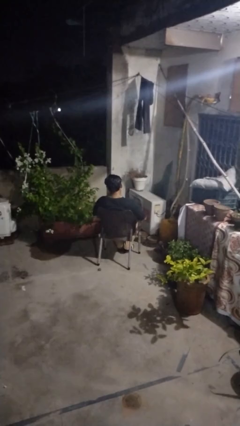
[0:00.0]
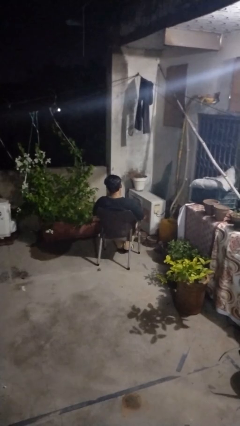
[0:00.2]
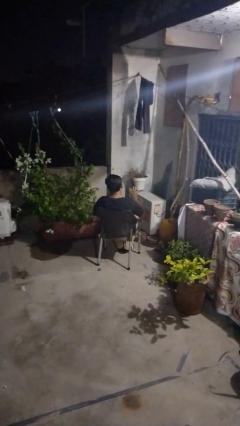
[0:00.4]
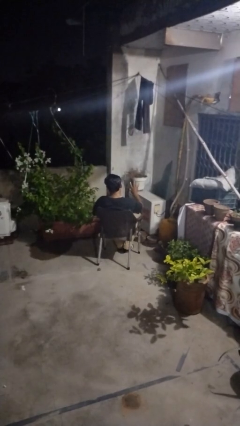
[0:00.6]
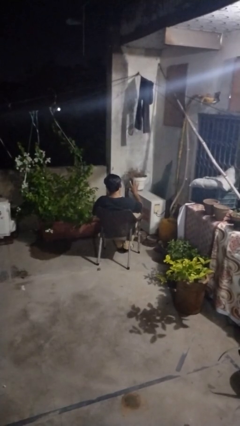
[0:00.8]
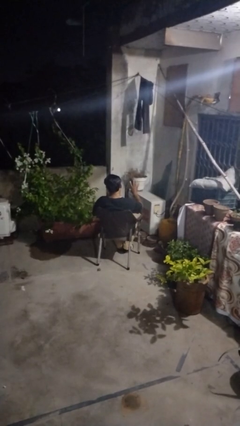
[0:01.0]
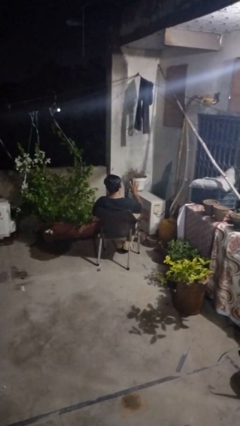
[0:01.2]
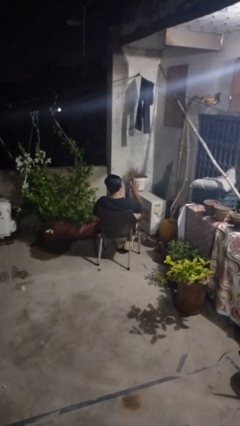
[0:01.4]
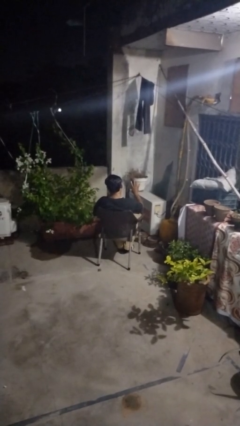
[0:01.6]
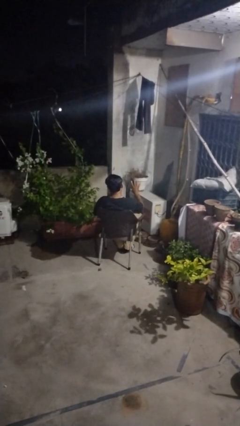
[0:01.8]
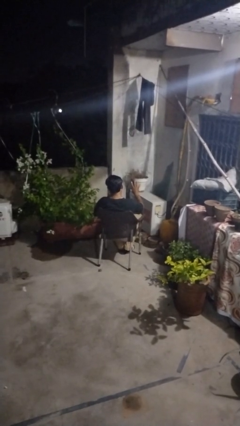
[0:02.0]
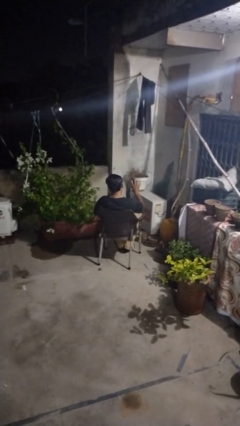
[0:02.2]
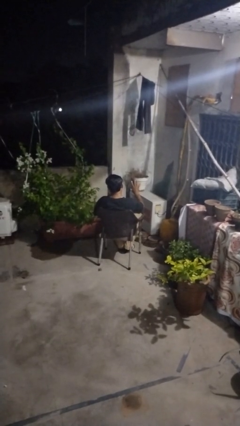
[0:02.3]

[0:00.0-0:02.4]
person gestures number four

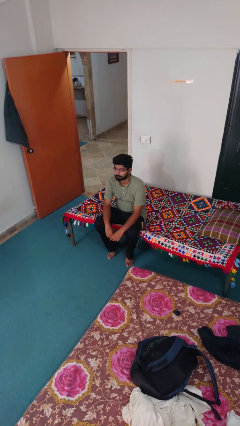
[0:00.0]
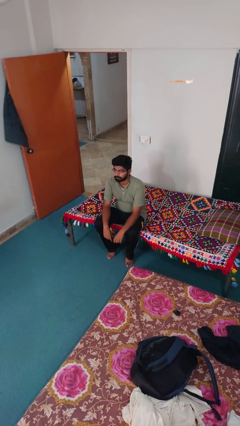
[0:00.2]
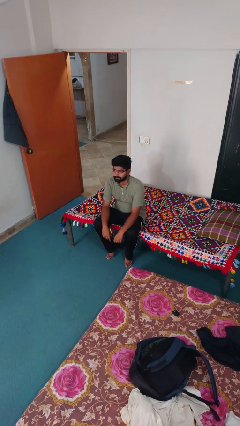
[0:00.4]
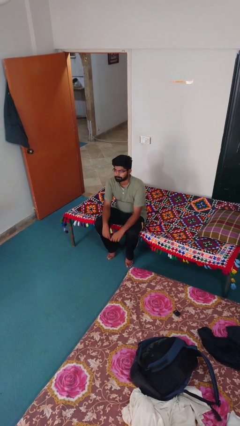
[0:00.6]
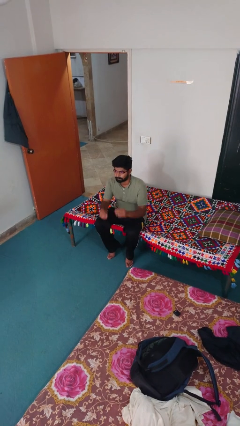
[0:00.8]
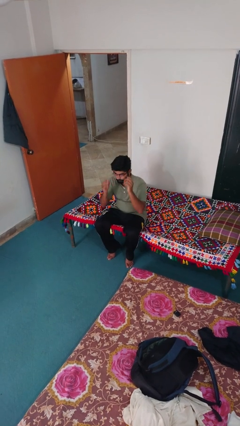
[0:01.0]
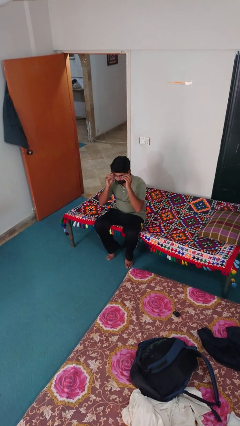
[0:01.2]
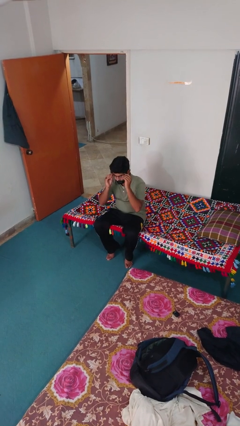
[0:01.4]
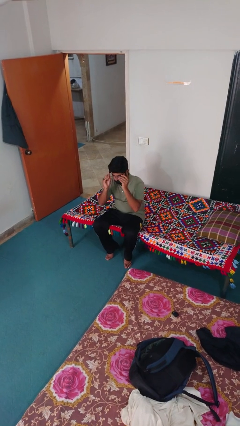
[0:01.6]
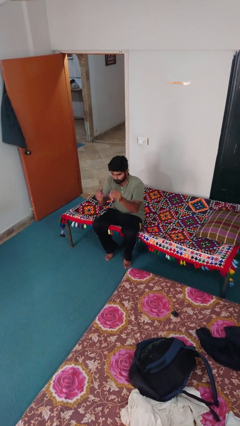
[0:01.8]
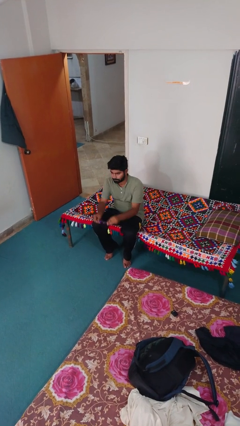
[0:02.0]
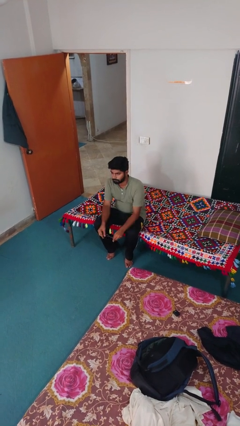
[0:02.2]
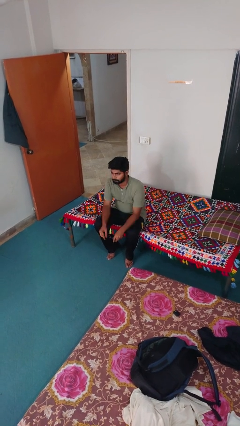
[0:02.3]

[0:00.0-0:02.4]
person takes off glasses

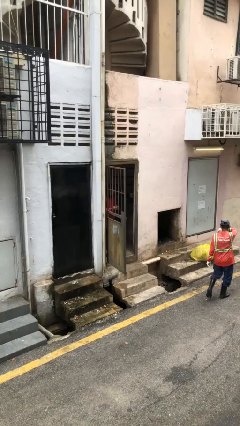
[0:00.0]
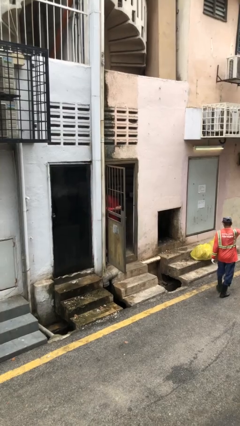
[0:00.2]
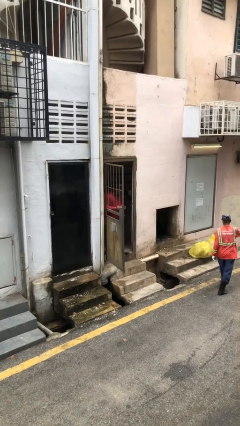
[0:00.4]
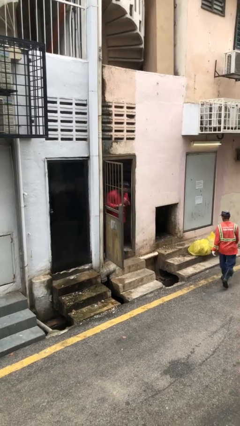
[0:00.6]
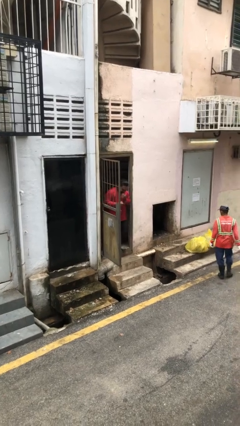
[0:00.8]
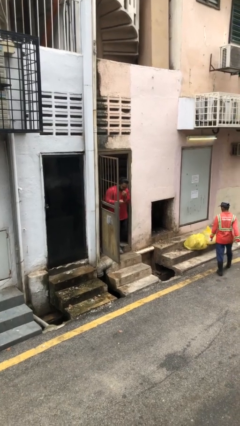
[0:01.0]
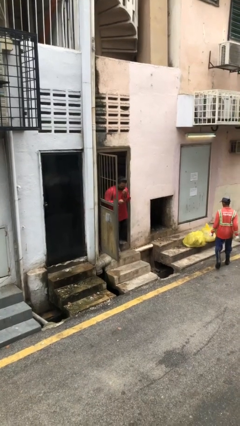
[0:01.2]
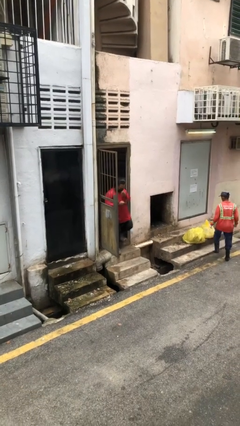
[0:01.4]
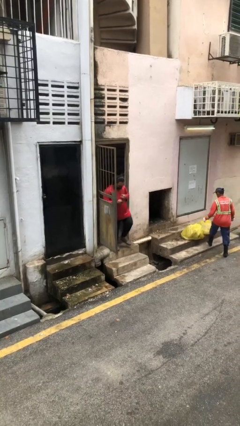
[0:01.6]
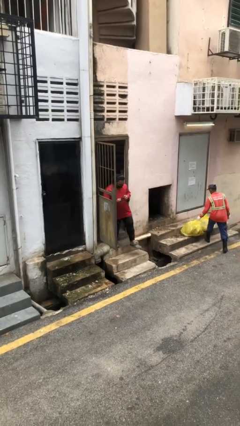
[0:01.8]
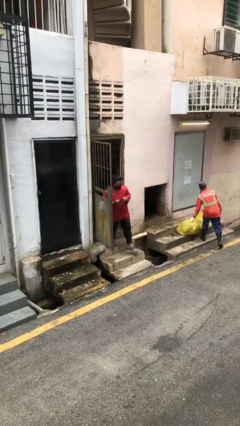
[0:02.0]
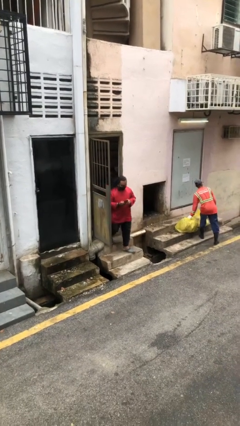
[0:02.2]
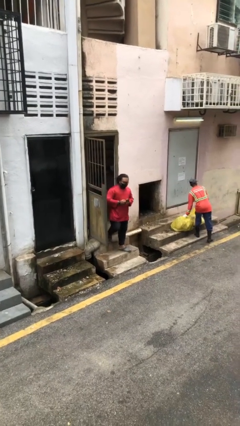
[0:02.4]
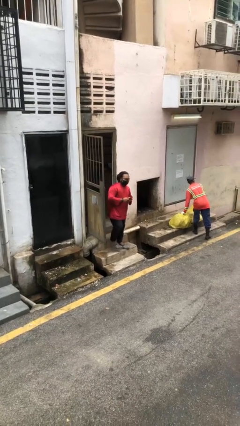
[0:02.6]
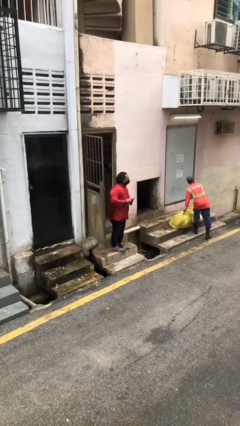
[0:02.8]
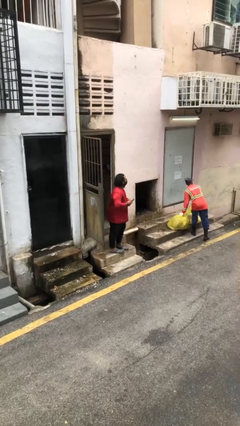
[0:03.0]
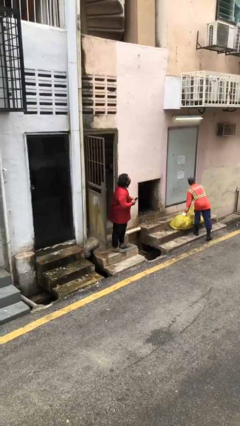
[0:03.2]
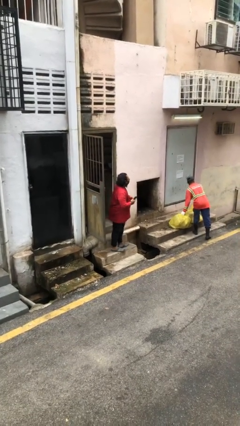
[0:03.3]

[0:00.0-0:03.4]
person enters scene through structure

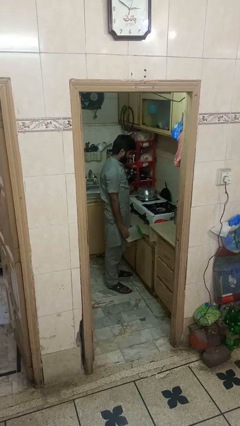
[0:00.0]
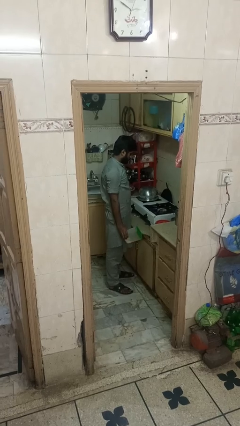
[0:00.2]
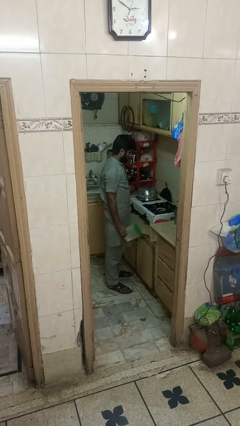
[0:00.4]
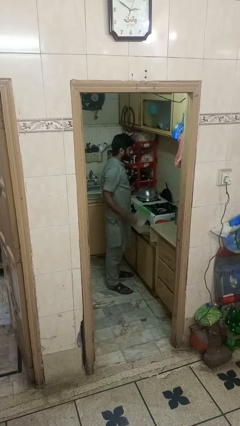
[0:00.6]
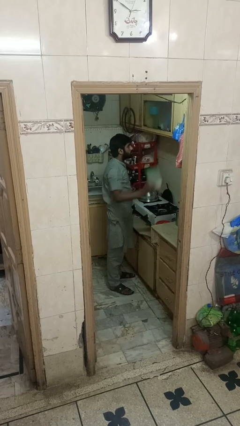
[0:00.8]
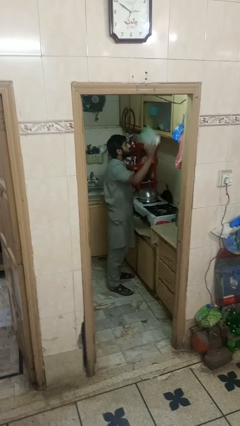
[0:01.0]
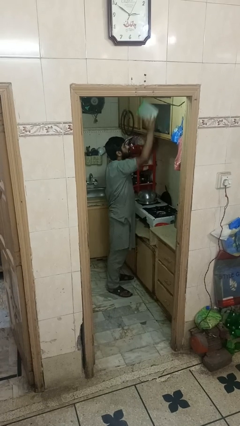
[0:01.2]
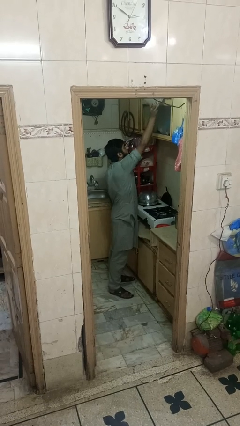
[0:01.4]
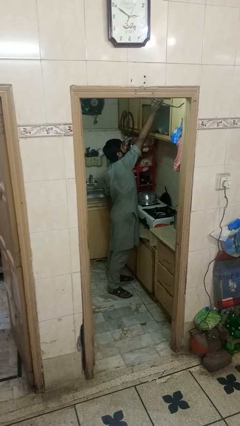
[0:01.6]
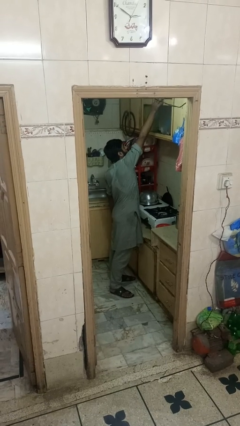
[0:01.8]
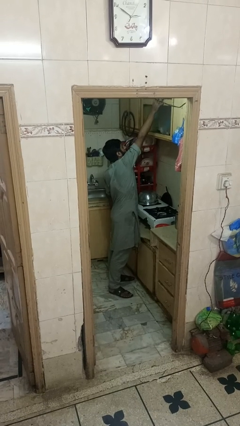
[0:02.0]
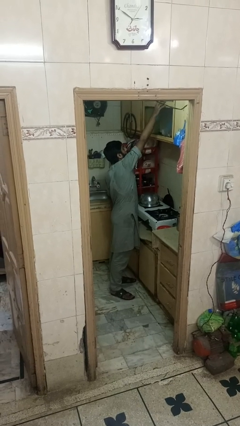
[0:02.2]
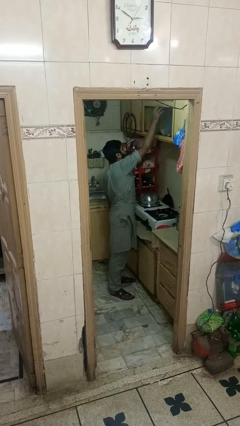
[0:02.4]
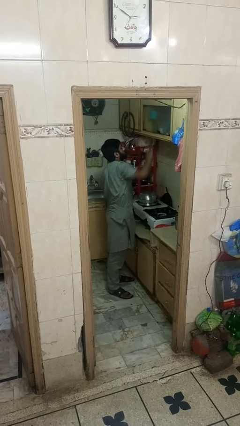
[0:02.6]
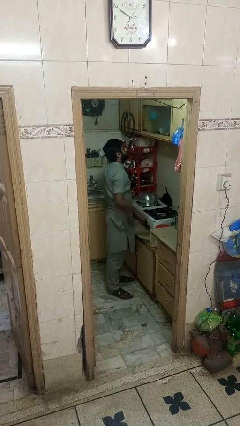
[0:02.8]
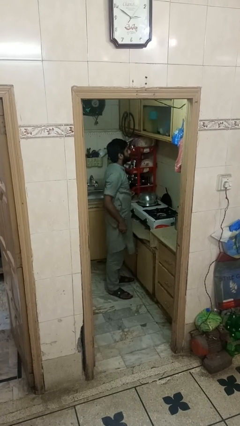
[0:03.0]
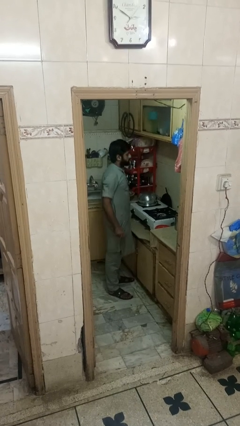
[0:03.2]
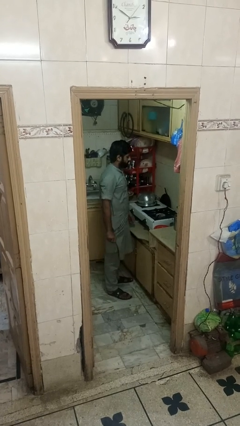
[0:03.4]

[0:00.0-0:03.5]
person puts down object on shelf

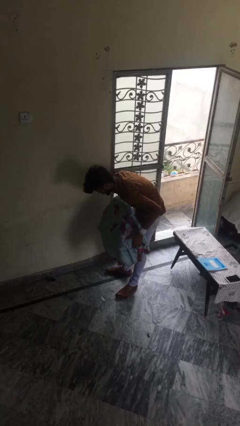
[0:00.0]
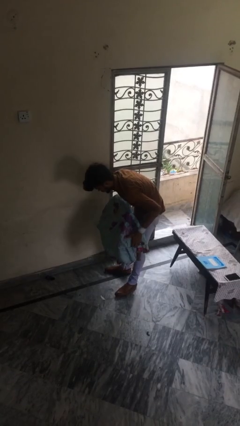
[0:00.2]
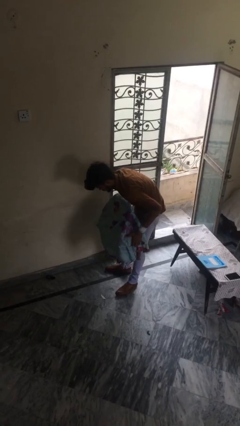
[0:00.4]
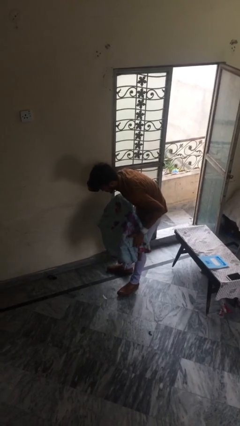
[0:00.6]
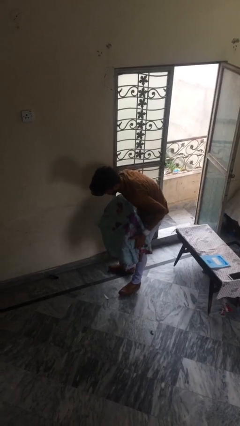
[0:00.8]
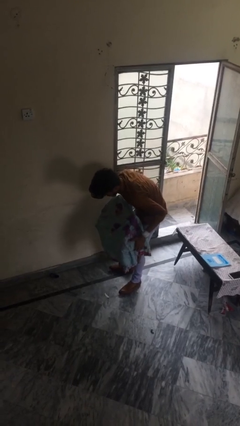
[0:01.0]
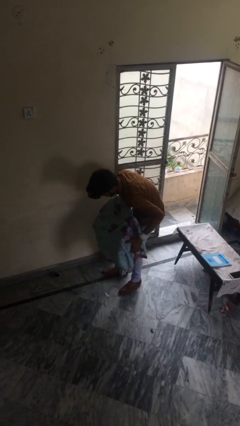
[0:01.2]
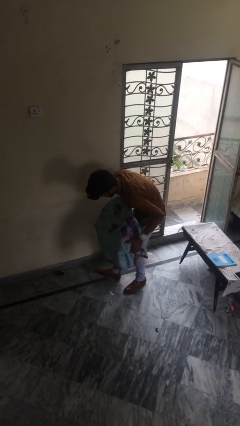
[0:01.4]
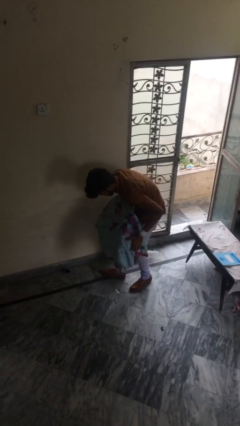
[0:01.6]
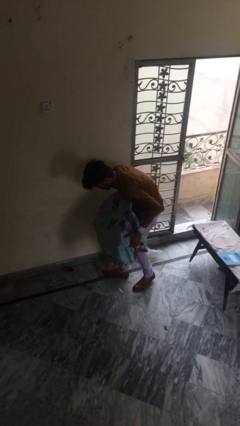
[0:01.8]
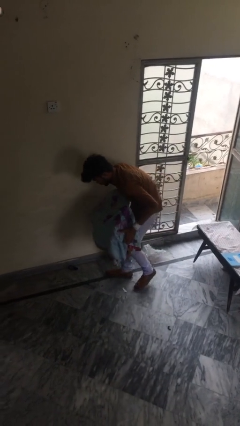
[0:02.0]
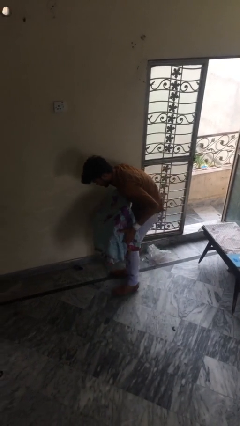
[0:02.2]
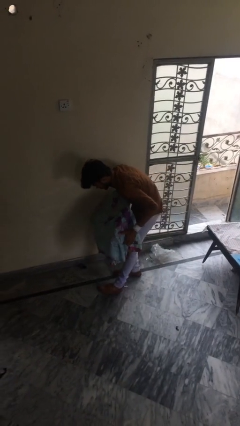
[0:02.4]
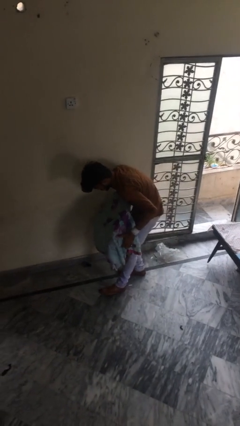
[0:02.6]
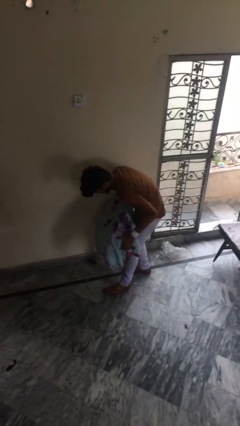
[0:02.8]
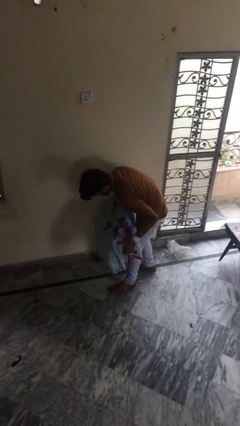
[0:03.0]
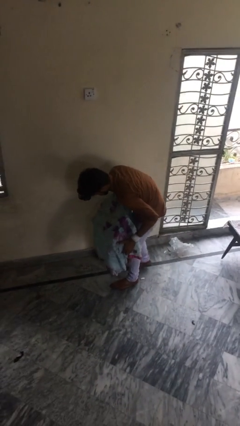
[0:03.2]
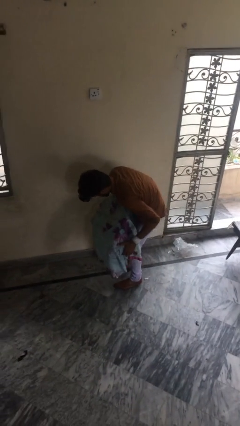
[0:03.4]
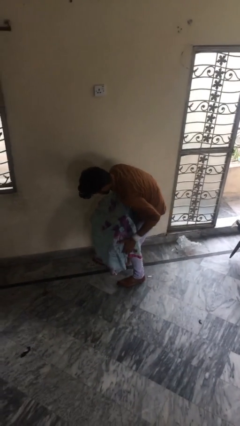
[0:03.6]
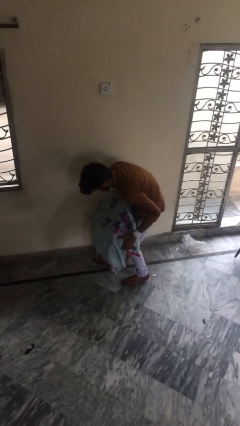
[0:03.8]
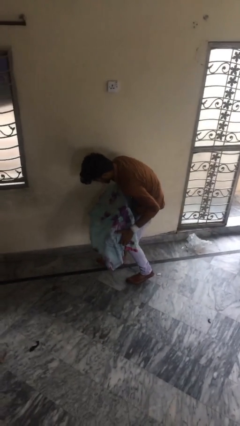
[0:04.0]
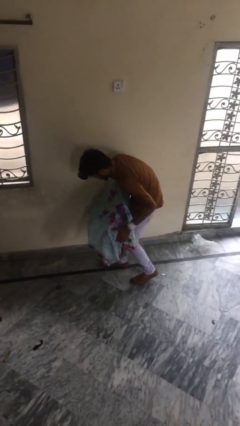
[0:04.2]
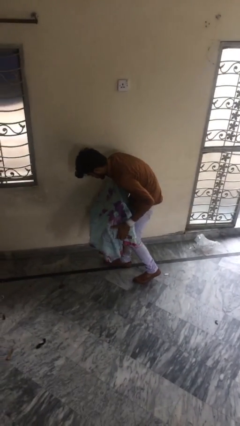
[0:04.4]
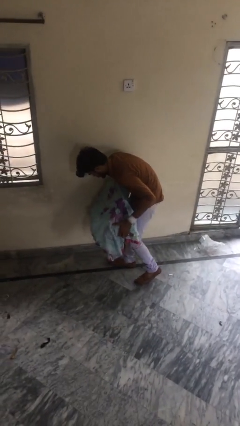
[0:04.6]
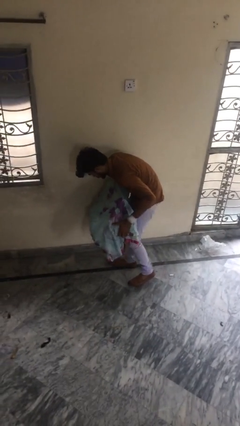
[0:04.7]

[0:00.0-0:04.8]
person carries heavy object

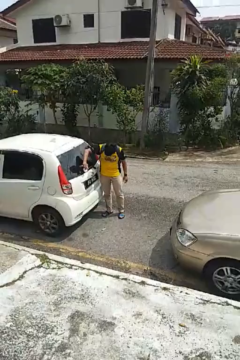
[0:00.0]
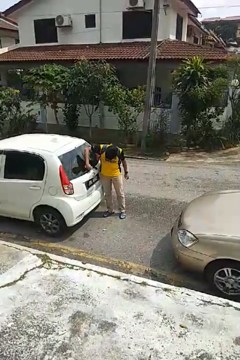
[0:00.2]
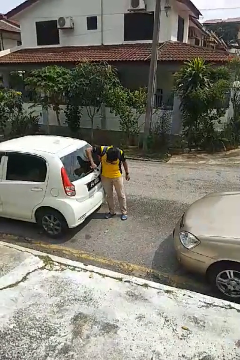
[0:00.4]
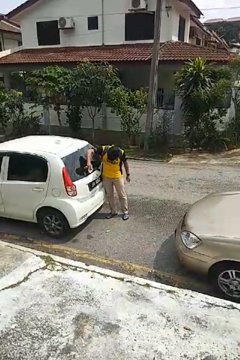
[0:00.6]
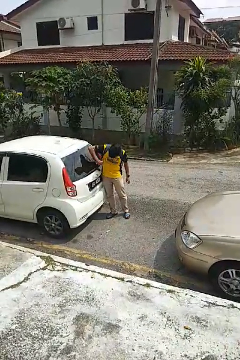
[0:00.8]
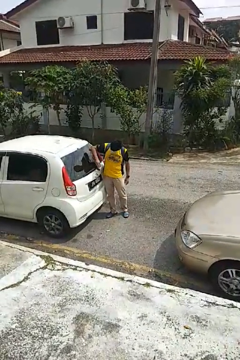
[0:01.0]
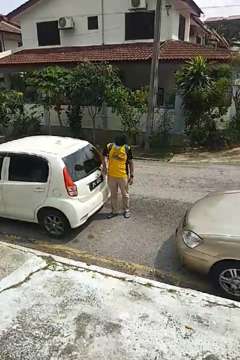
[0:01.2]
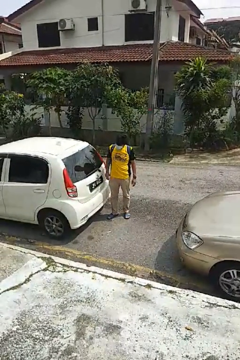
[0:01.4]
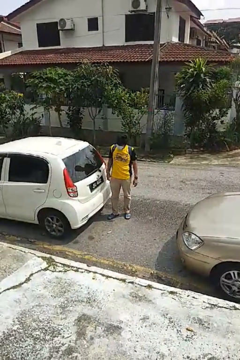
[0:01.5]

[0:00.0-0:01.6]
person polishes car with rag
